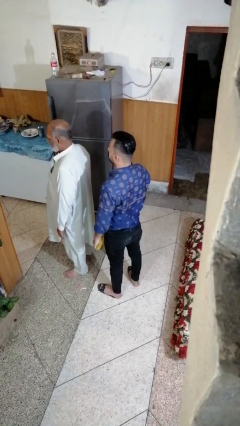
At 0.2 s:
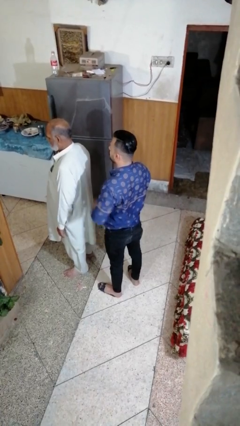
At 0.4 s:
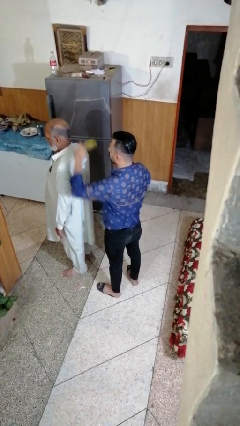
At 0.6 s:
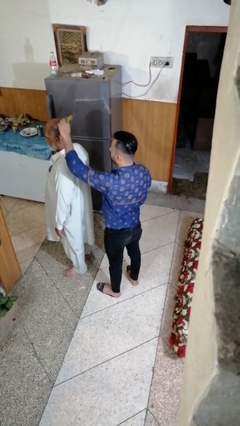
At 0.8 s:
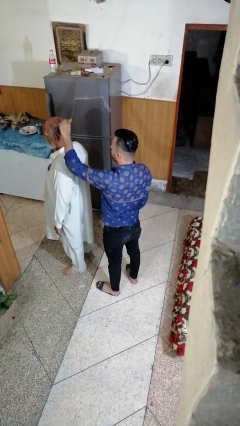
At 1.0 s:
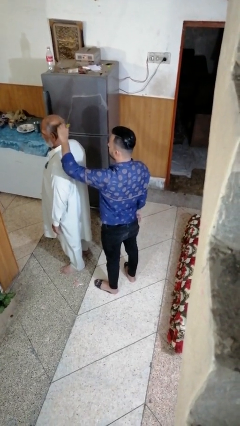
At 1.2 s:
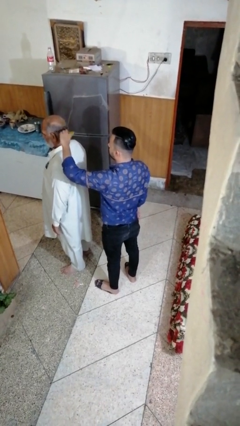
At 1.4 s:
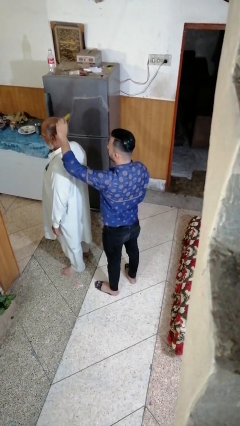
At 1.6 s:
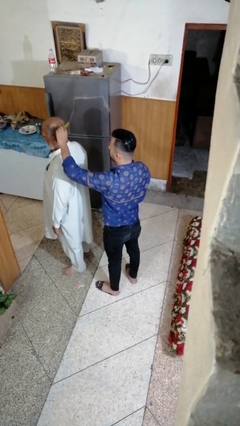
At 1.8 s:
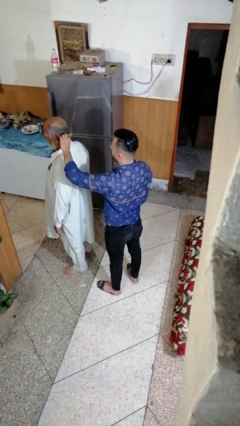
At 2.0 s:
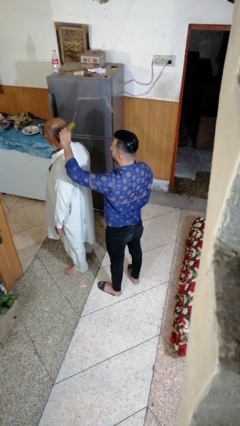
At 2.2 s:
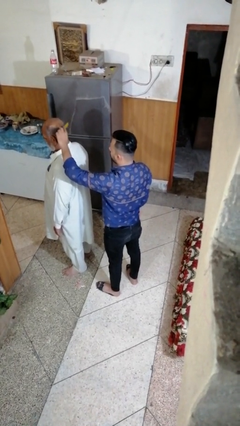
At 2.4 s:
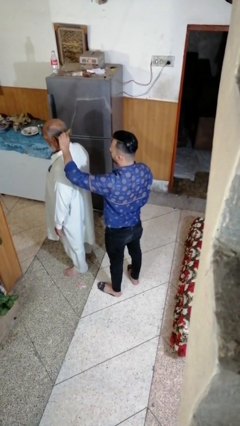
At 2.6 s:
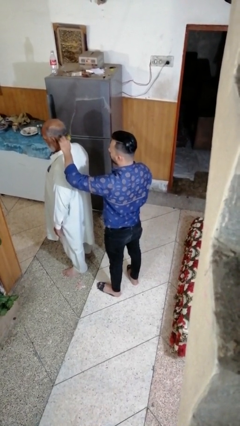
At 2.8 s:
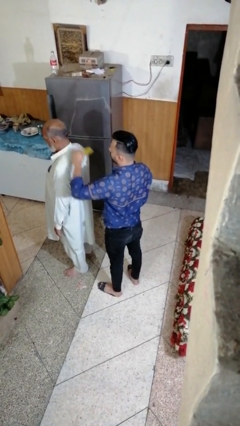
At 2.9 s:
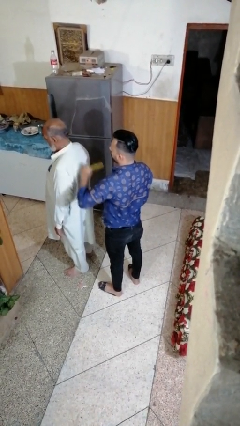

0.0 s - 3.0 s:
person brushes hair of person

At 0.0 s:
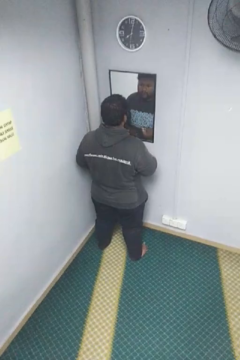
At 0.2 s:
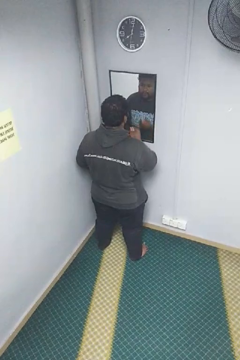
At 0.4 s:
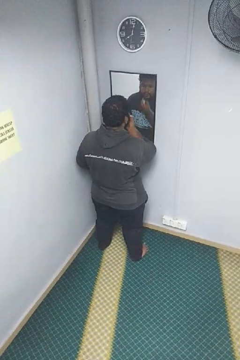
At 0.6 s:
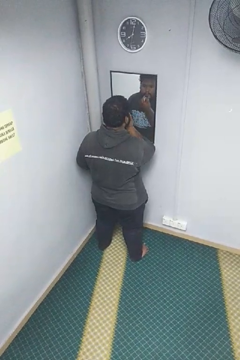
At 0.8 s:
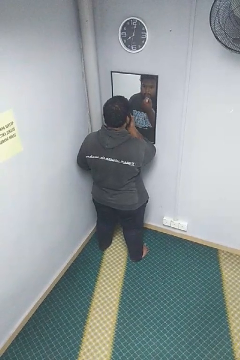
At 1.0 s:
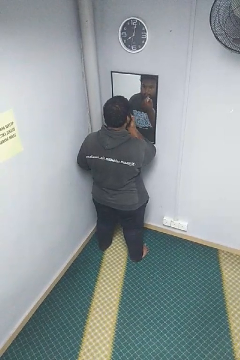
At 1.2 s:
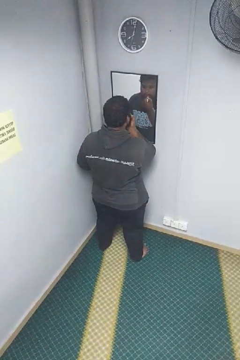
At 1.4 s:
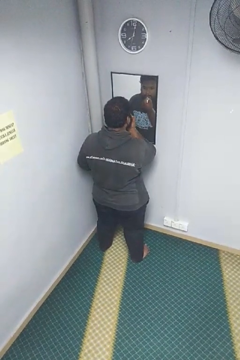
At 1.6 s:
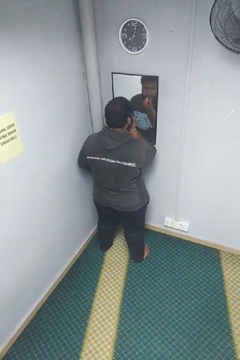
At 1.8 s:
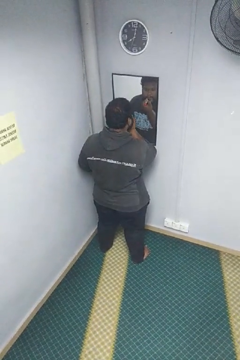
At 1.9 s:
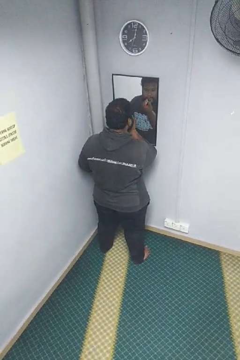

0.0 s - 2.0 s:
person applies lip makeup

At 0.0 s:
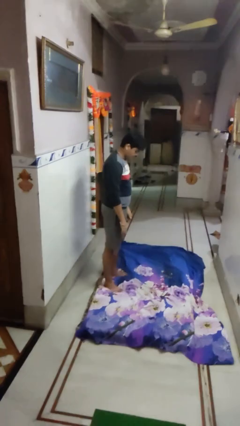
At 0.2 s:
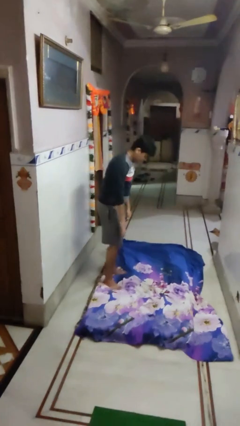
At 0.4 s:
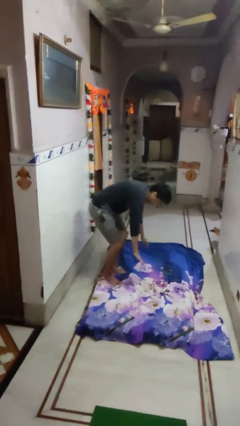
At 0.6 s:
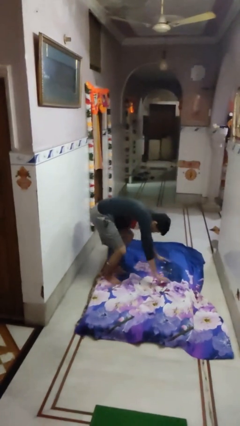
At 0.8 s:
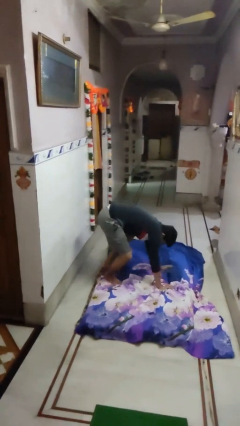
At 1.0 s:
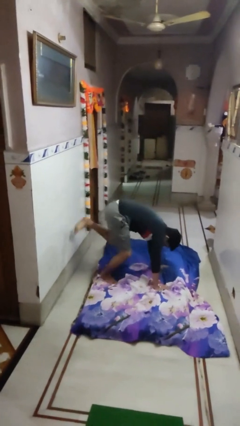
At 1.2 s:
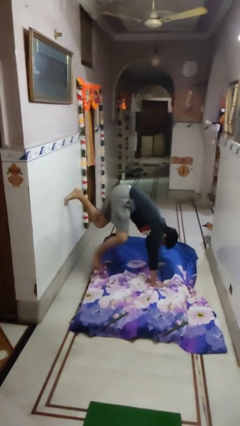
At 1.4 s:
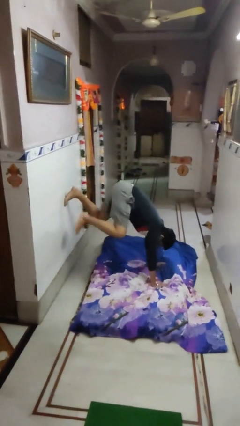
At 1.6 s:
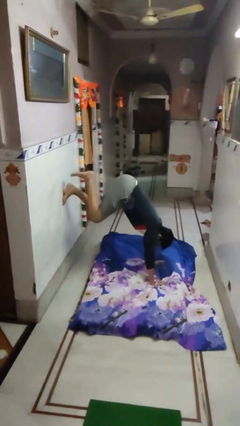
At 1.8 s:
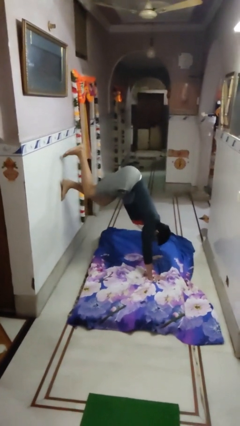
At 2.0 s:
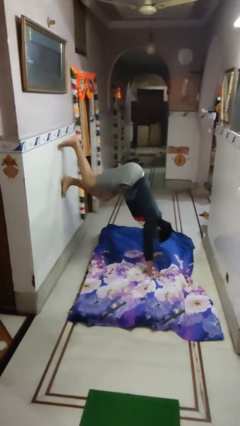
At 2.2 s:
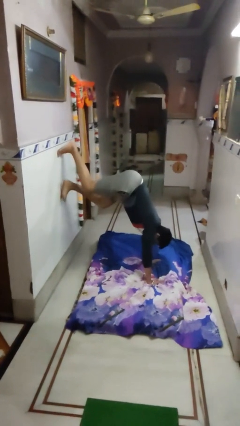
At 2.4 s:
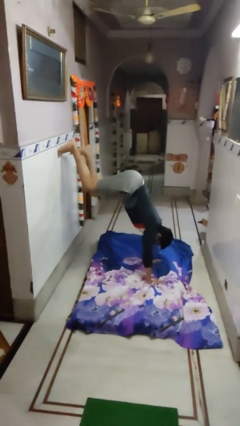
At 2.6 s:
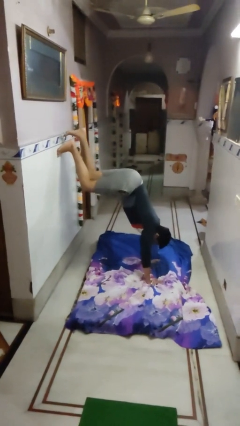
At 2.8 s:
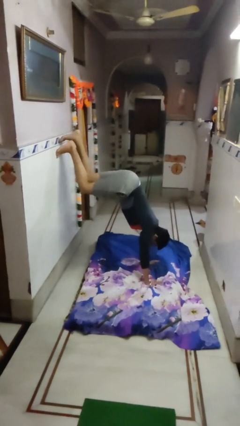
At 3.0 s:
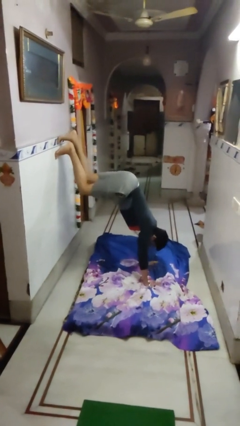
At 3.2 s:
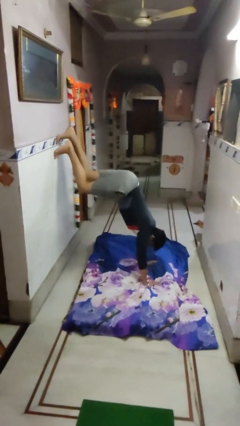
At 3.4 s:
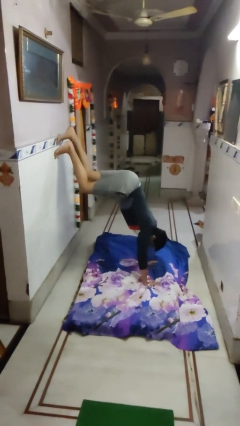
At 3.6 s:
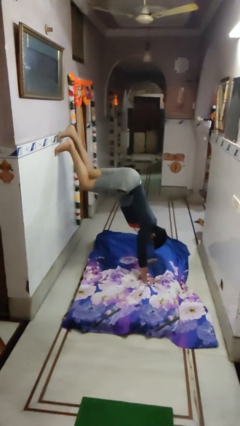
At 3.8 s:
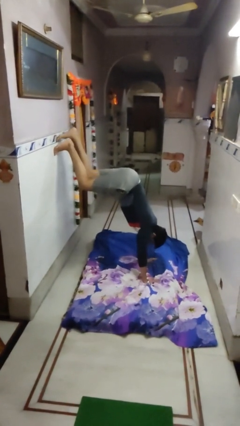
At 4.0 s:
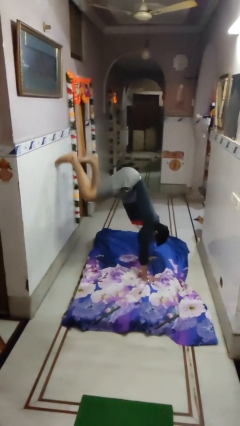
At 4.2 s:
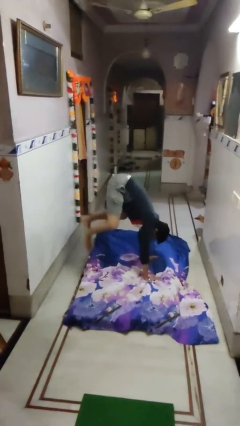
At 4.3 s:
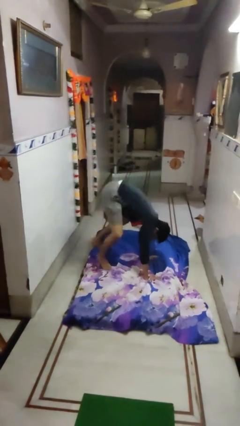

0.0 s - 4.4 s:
person handstand

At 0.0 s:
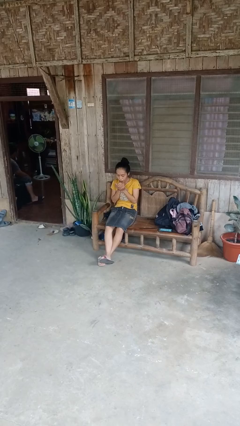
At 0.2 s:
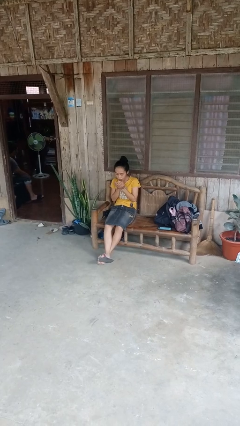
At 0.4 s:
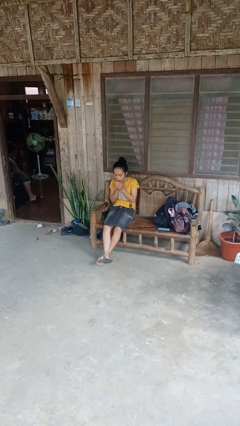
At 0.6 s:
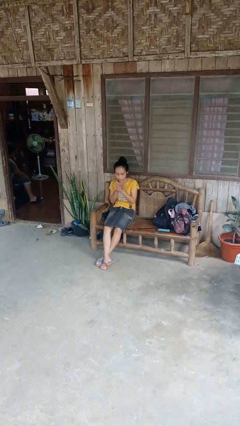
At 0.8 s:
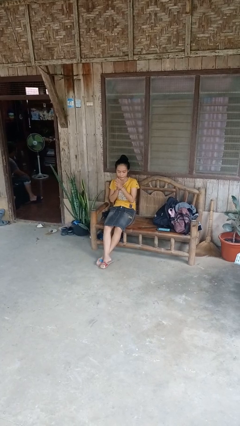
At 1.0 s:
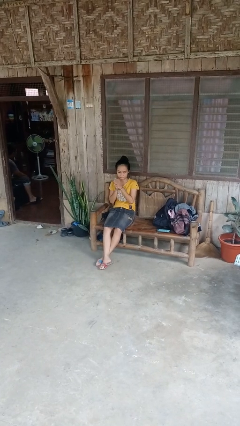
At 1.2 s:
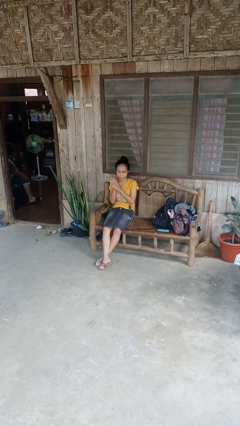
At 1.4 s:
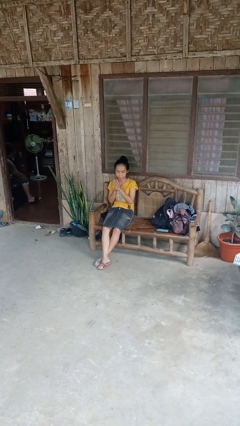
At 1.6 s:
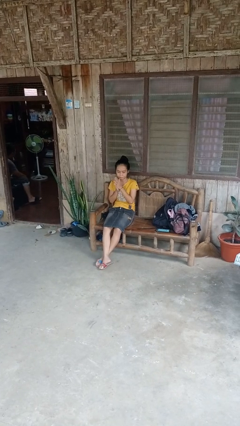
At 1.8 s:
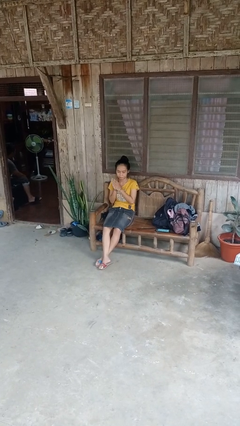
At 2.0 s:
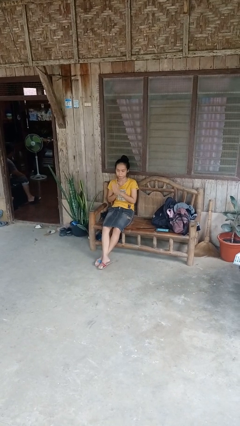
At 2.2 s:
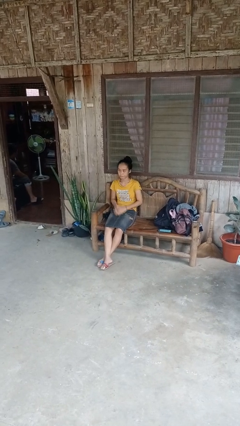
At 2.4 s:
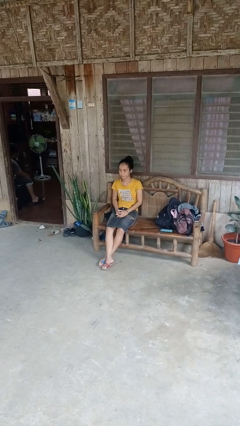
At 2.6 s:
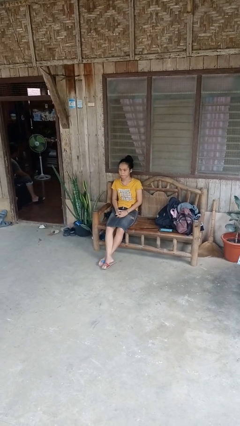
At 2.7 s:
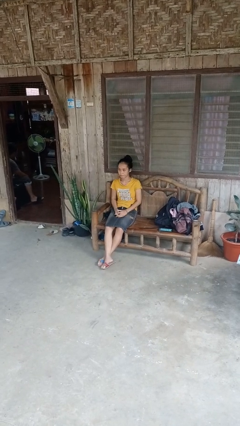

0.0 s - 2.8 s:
person blows into hands

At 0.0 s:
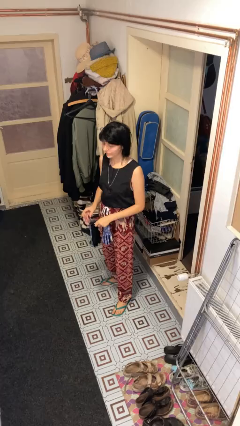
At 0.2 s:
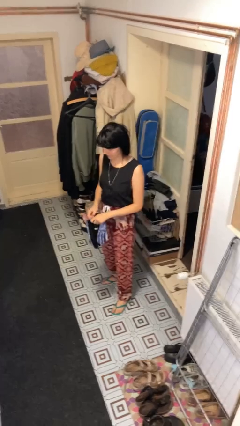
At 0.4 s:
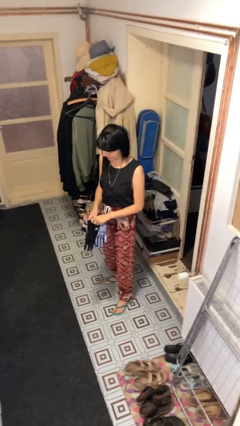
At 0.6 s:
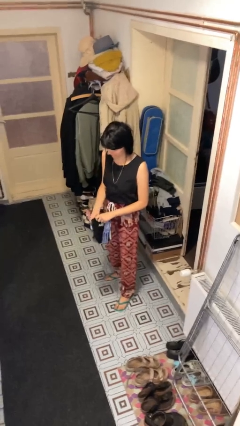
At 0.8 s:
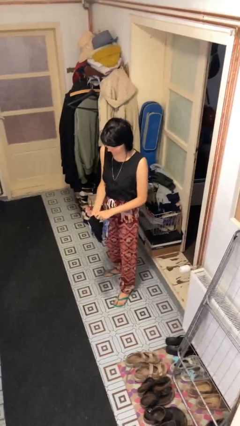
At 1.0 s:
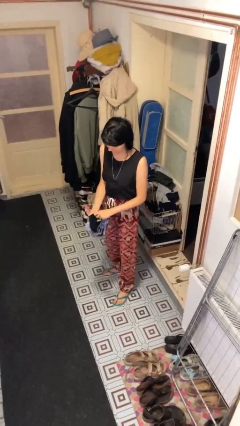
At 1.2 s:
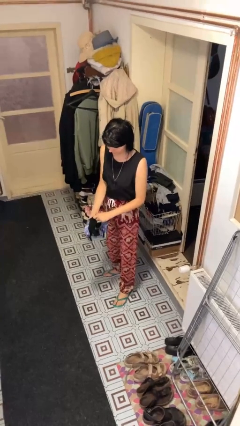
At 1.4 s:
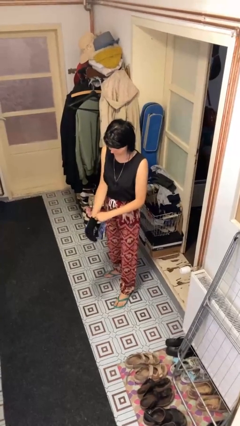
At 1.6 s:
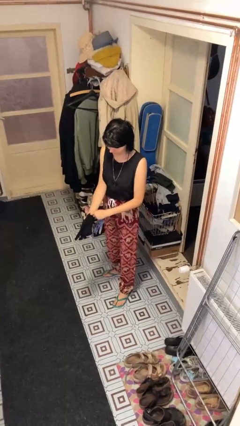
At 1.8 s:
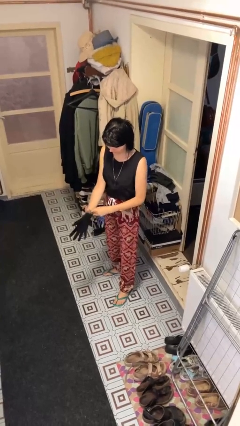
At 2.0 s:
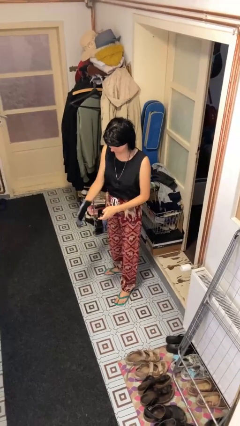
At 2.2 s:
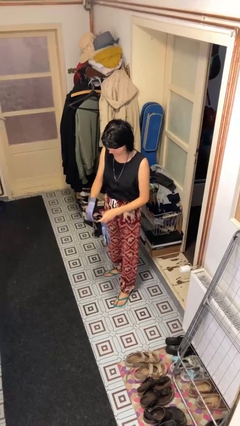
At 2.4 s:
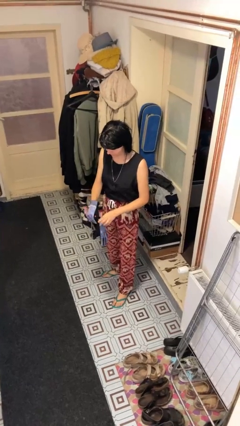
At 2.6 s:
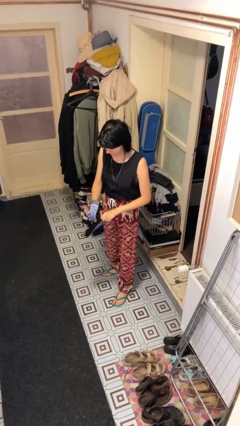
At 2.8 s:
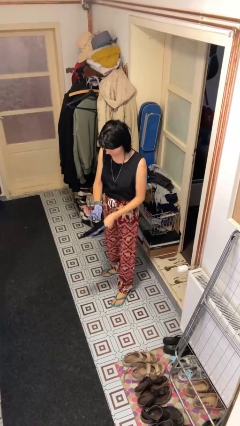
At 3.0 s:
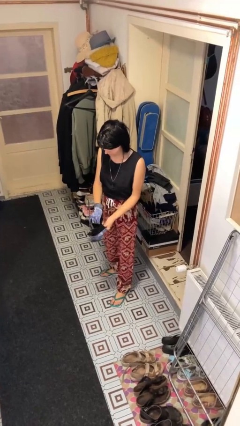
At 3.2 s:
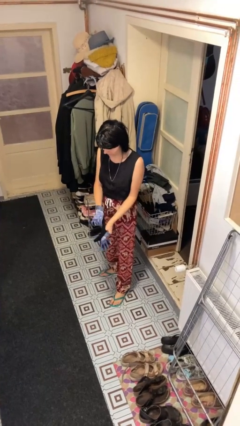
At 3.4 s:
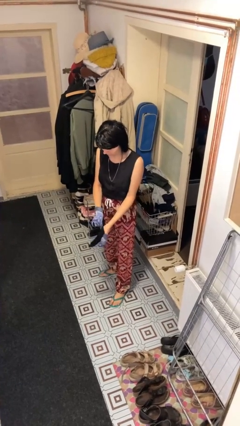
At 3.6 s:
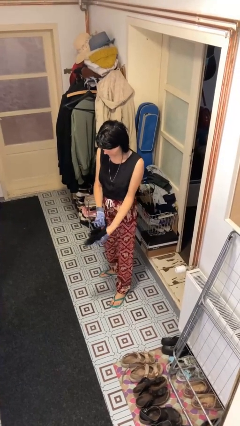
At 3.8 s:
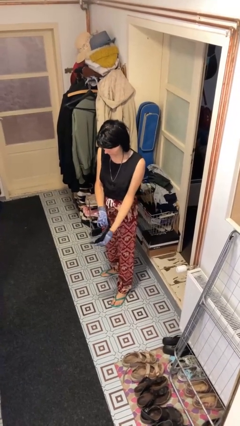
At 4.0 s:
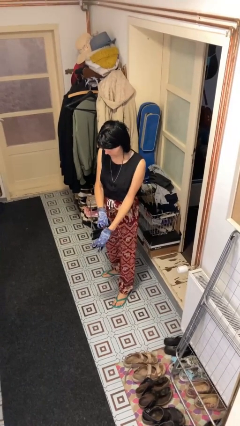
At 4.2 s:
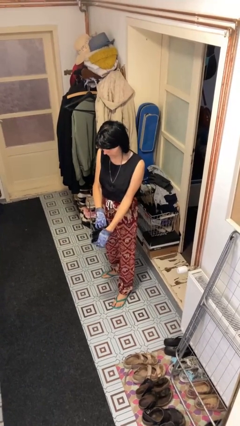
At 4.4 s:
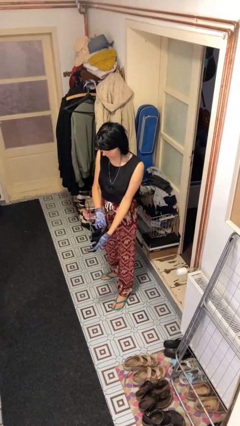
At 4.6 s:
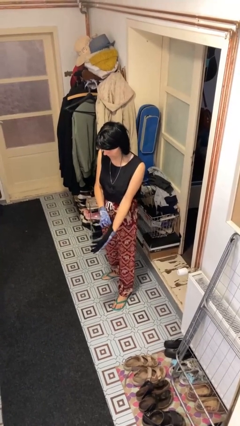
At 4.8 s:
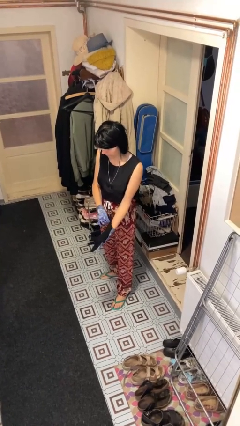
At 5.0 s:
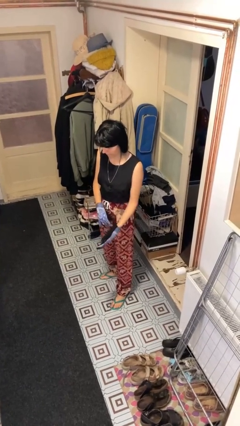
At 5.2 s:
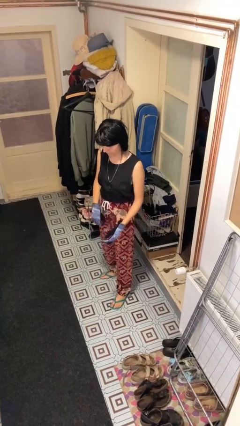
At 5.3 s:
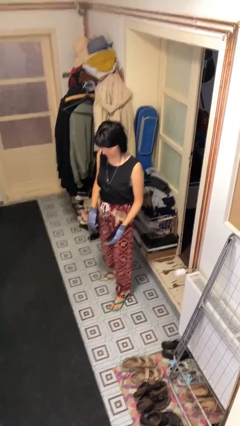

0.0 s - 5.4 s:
person puts on gloves

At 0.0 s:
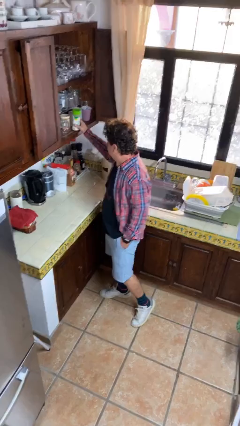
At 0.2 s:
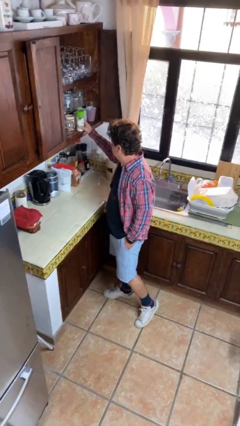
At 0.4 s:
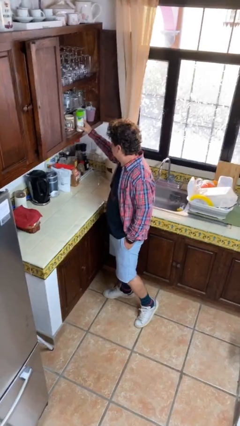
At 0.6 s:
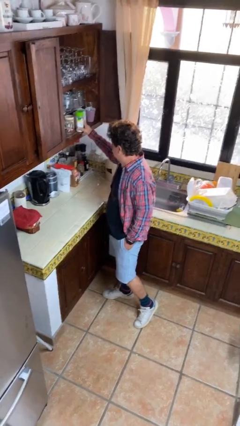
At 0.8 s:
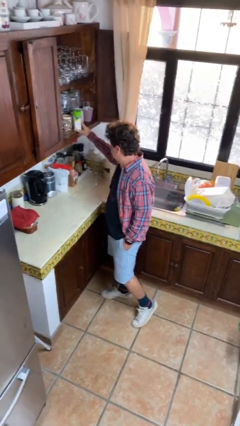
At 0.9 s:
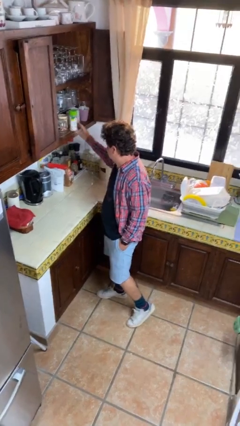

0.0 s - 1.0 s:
person puts down object on shelf
